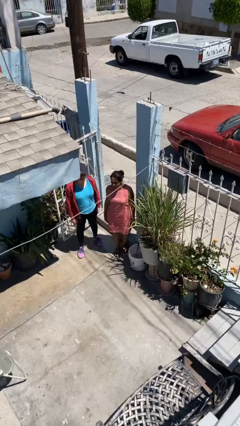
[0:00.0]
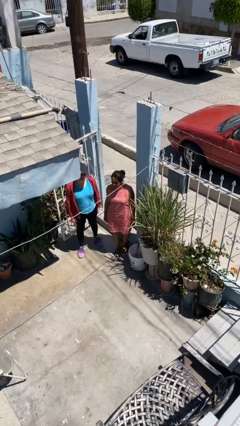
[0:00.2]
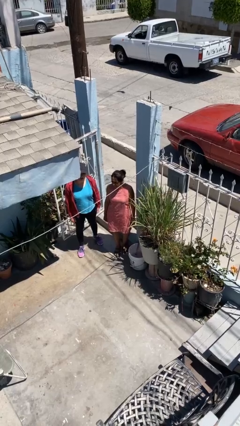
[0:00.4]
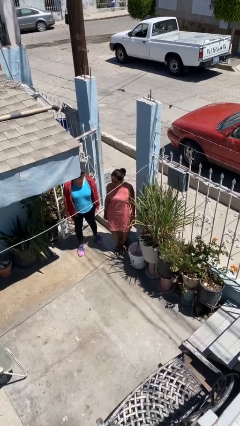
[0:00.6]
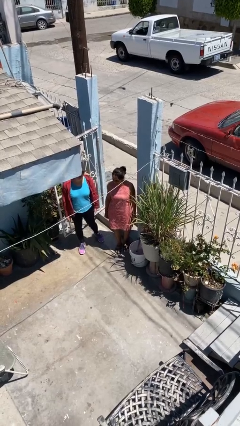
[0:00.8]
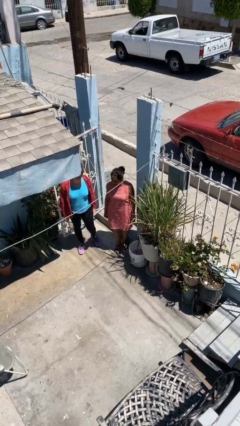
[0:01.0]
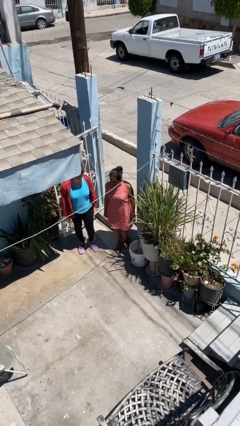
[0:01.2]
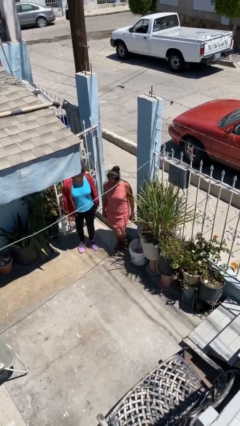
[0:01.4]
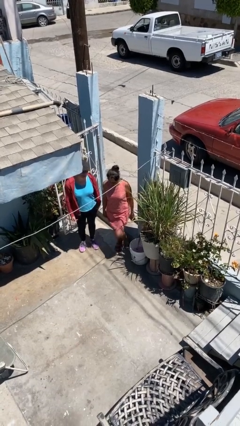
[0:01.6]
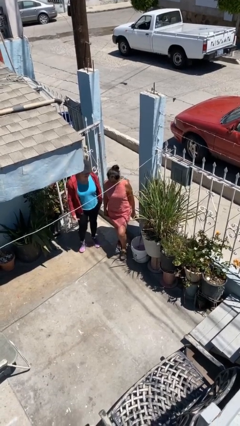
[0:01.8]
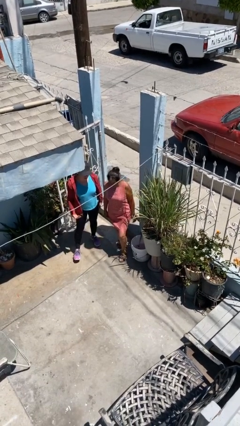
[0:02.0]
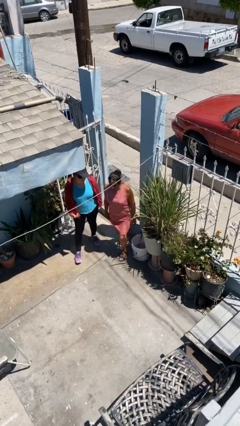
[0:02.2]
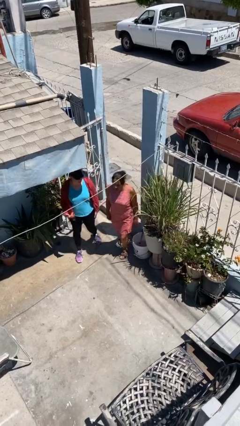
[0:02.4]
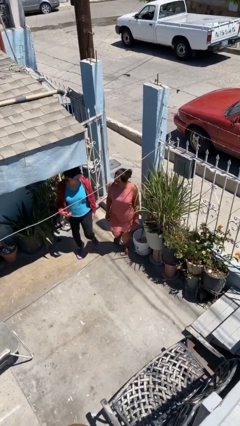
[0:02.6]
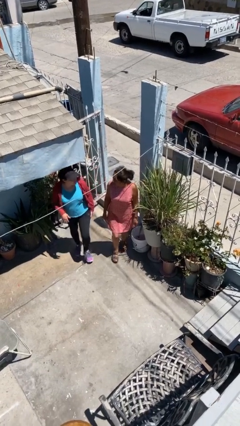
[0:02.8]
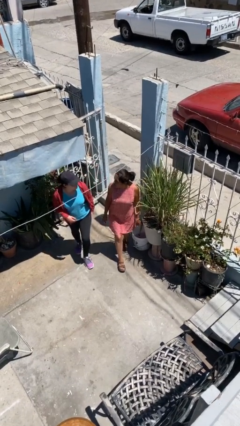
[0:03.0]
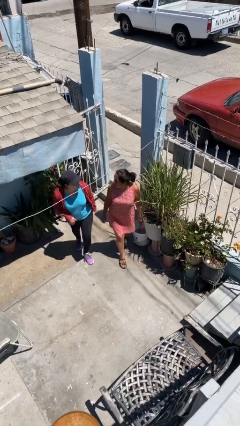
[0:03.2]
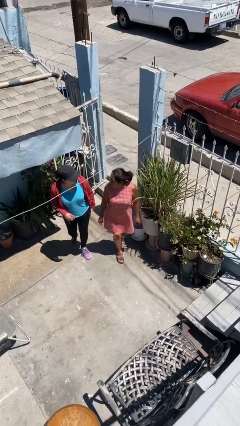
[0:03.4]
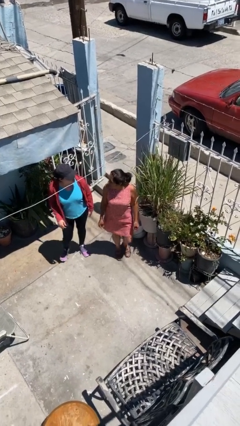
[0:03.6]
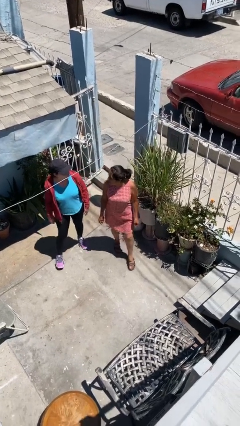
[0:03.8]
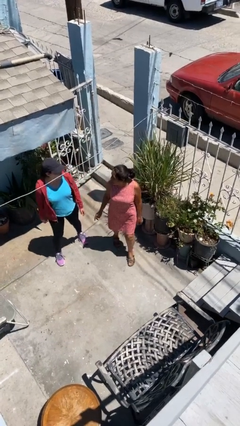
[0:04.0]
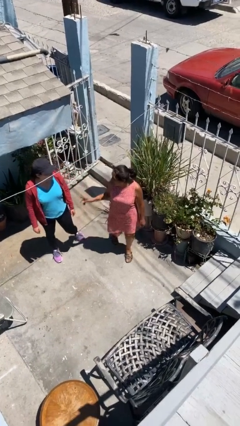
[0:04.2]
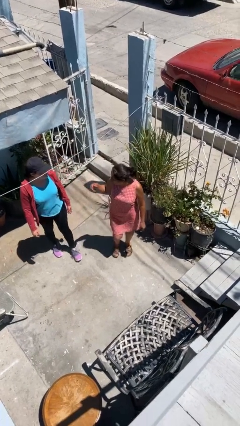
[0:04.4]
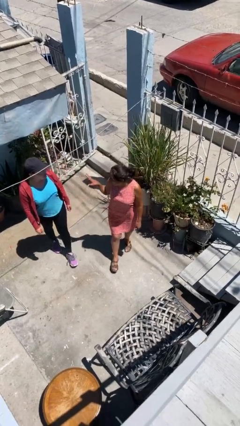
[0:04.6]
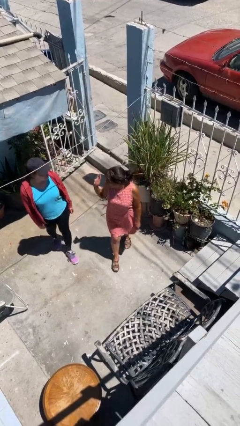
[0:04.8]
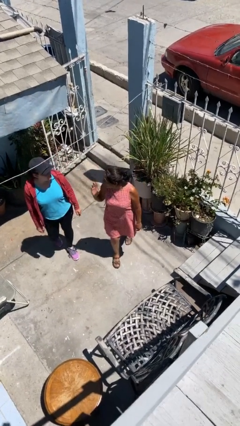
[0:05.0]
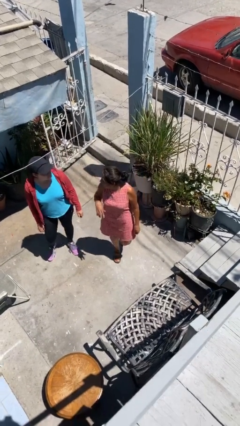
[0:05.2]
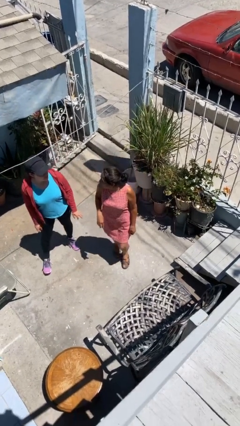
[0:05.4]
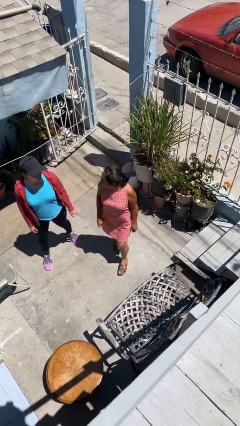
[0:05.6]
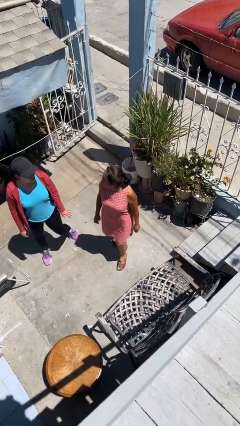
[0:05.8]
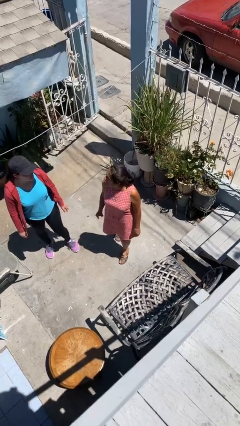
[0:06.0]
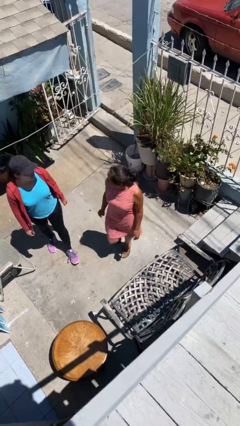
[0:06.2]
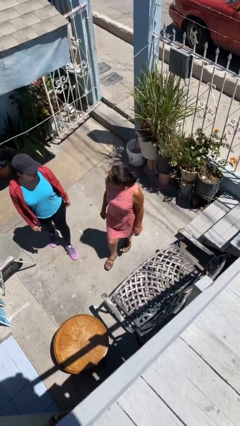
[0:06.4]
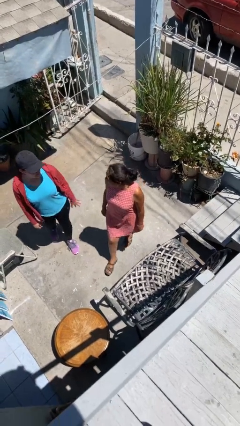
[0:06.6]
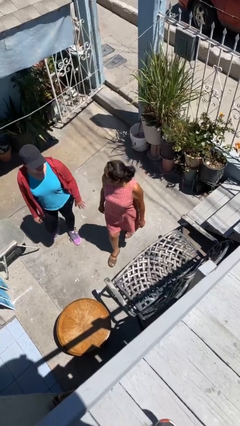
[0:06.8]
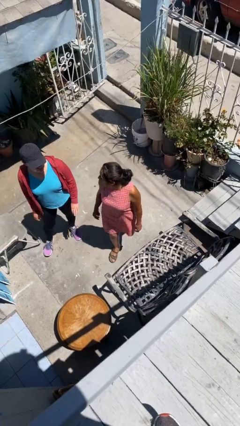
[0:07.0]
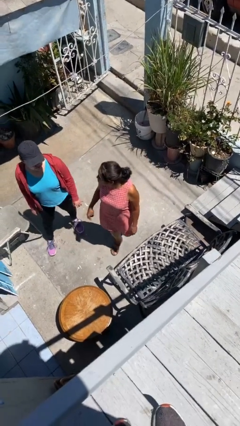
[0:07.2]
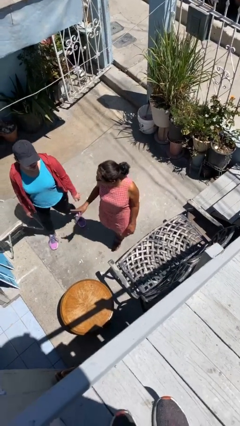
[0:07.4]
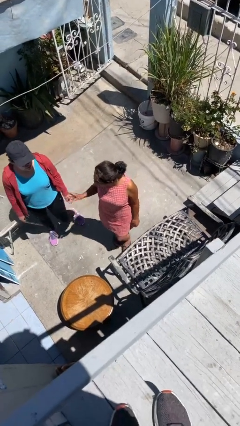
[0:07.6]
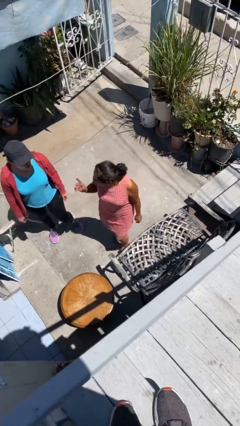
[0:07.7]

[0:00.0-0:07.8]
person talks to person

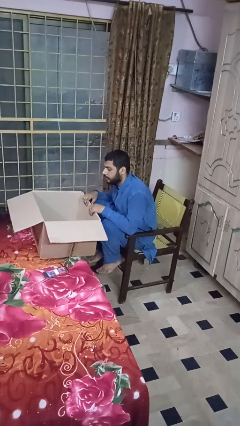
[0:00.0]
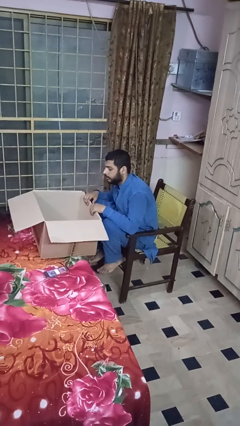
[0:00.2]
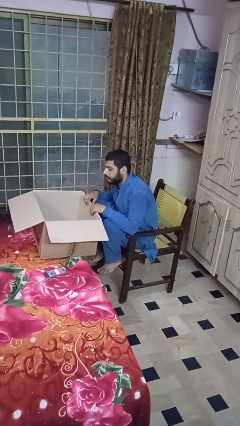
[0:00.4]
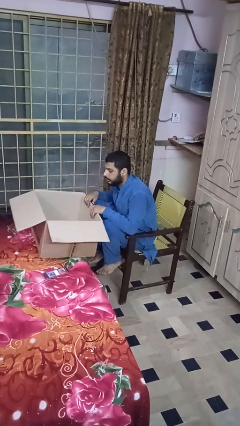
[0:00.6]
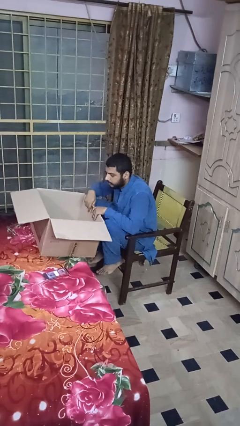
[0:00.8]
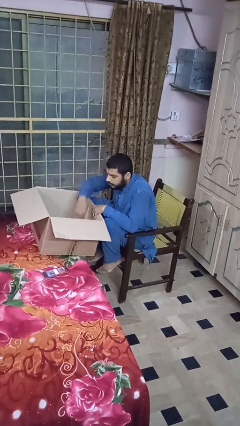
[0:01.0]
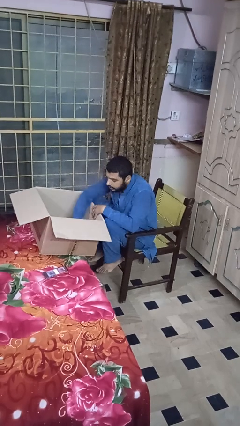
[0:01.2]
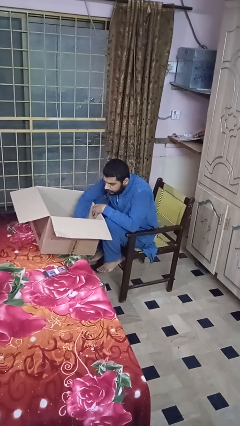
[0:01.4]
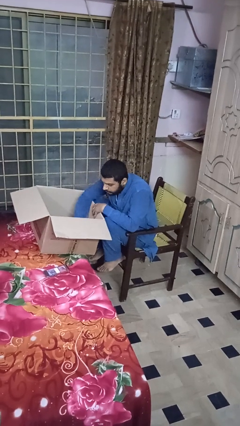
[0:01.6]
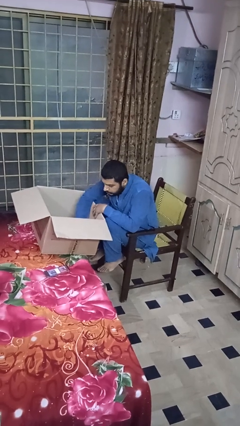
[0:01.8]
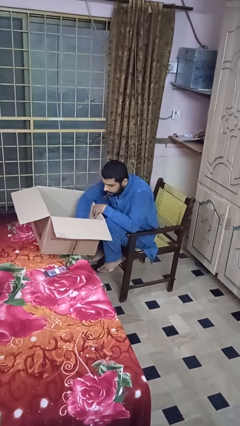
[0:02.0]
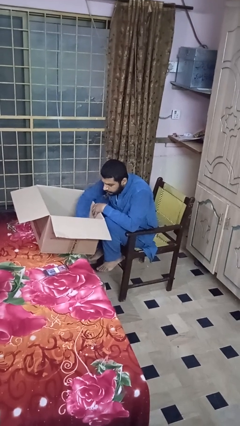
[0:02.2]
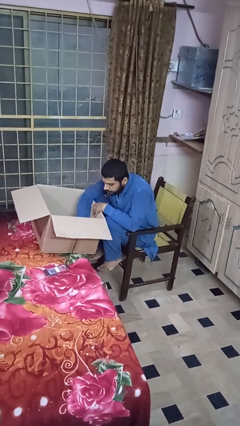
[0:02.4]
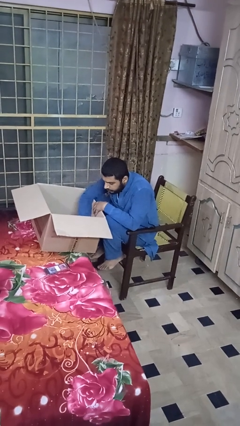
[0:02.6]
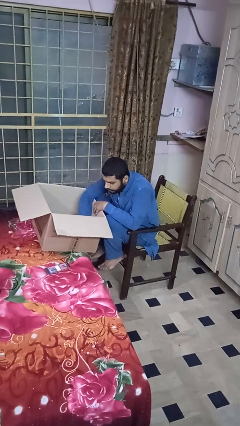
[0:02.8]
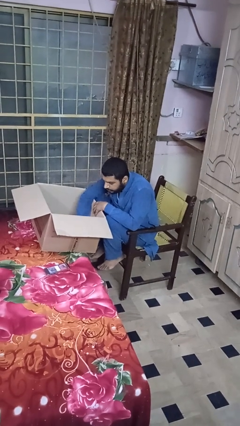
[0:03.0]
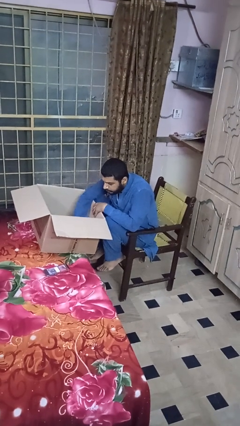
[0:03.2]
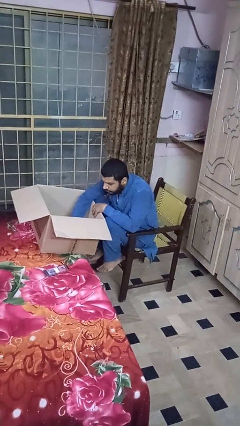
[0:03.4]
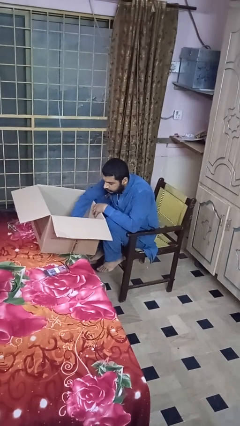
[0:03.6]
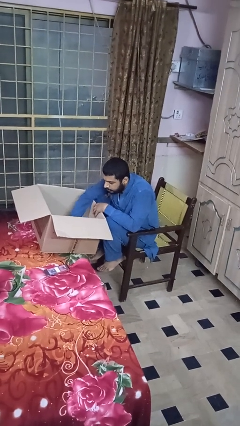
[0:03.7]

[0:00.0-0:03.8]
person searches in box

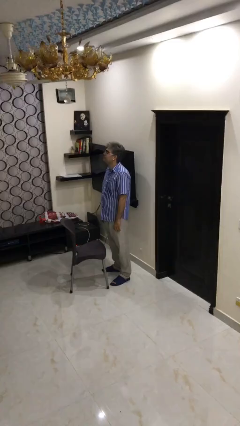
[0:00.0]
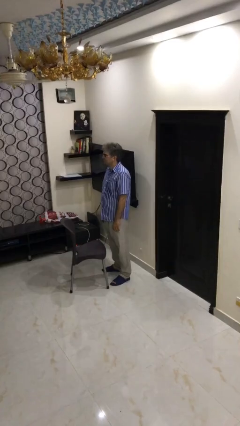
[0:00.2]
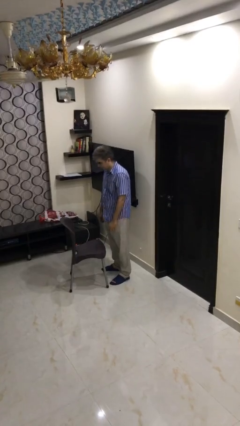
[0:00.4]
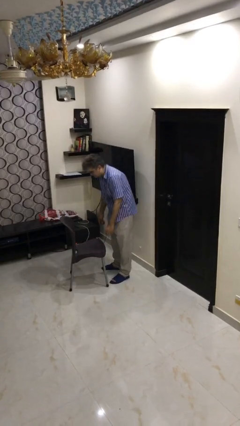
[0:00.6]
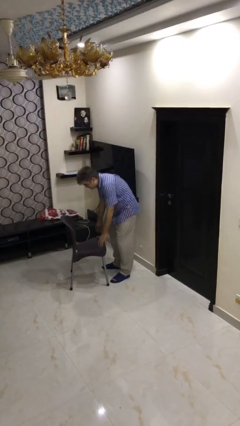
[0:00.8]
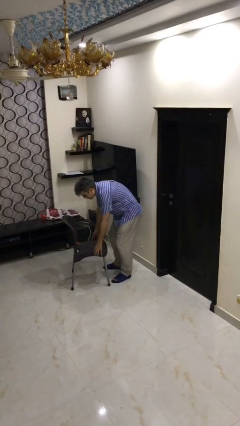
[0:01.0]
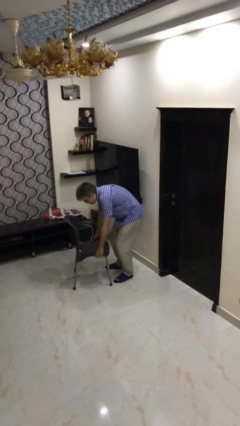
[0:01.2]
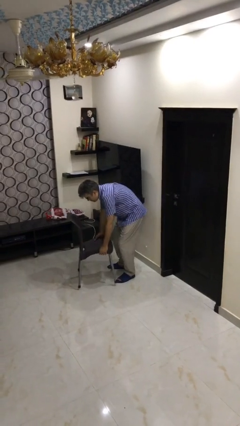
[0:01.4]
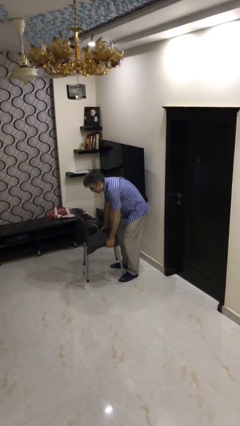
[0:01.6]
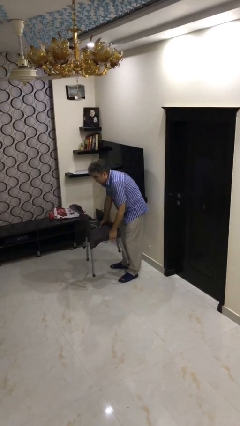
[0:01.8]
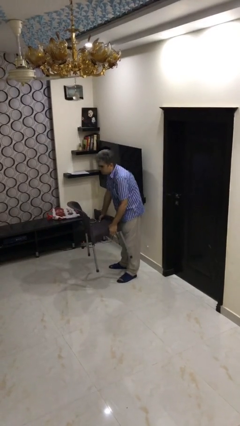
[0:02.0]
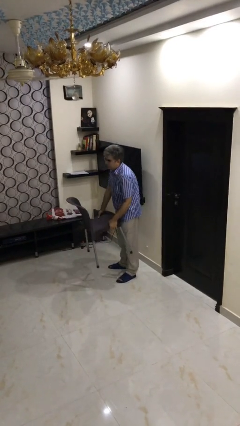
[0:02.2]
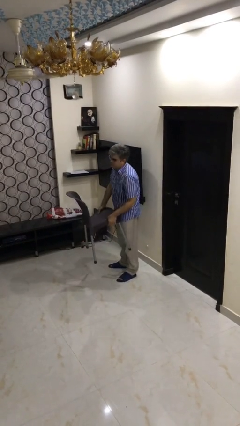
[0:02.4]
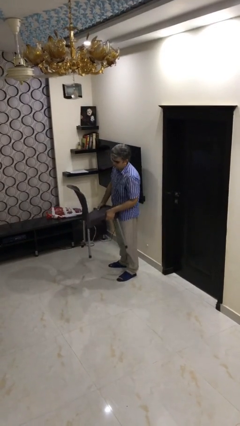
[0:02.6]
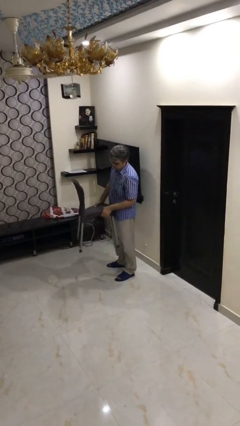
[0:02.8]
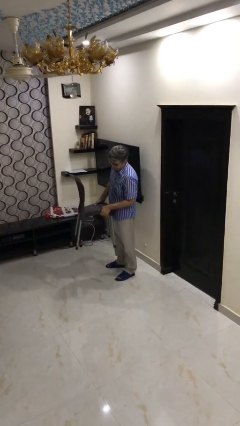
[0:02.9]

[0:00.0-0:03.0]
person picks up object from floor

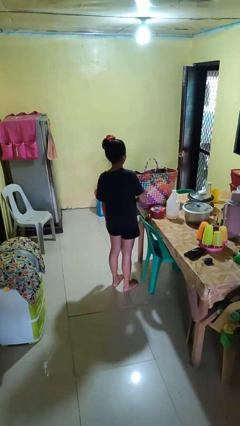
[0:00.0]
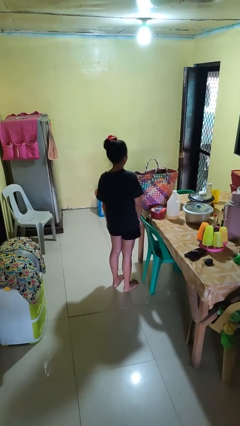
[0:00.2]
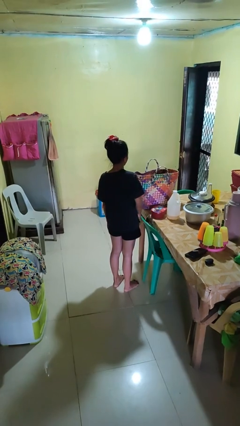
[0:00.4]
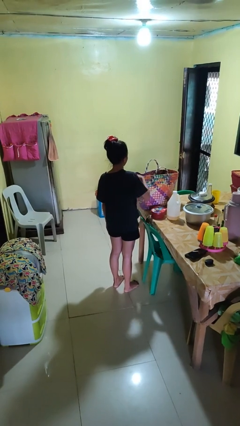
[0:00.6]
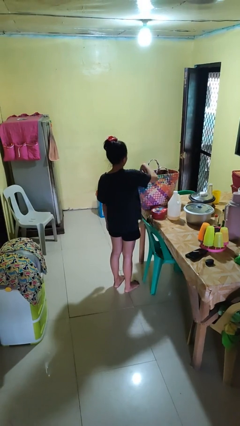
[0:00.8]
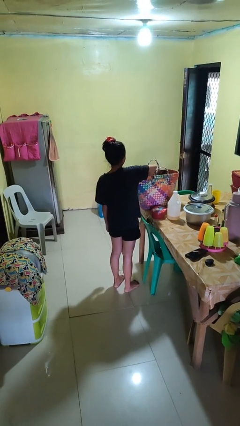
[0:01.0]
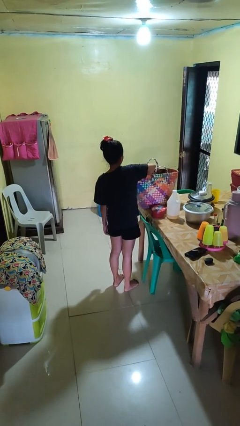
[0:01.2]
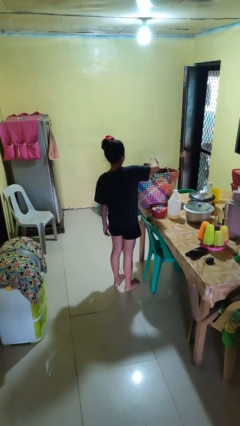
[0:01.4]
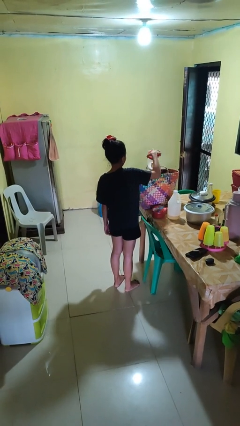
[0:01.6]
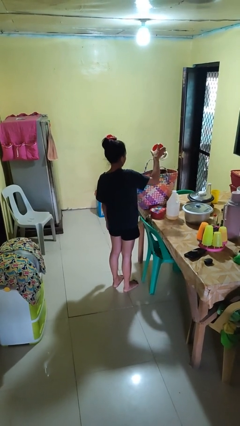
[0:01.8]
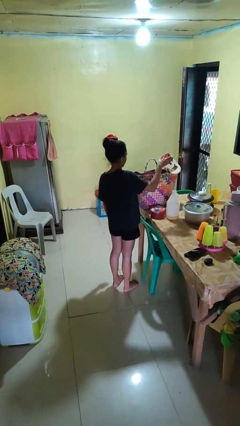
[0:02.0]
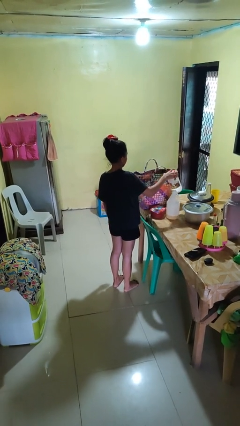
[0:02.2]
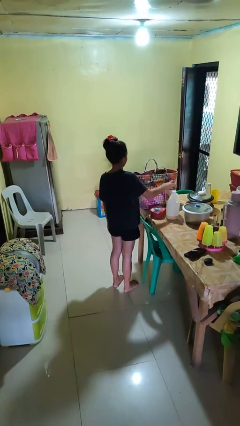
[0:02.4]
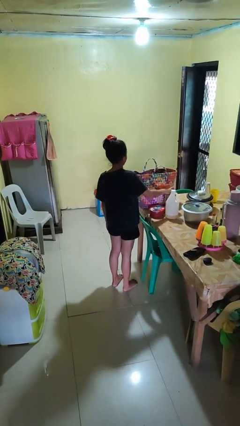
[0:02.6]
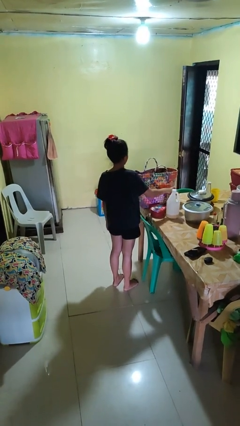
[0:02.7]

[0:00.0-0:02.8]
person takes object from basket
